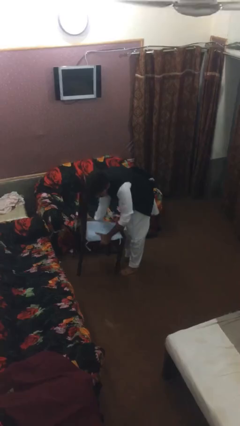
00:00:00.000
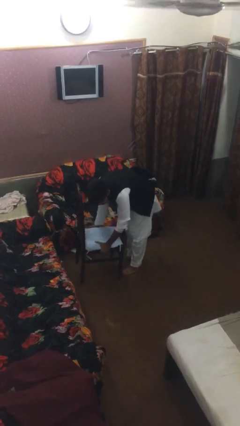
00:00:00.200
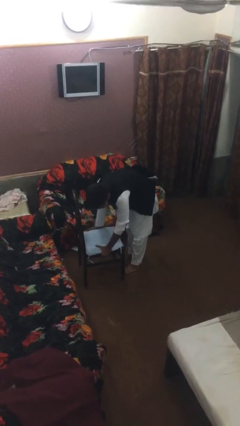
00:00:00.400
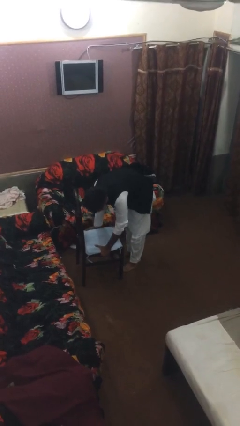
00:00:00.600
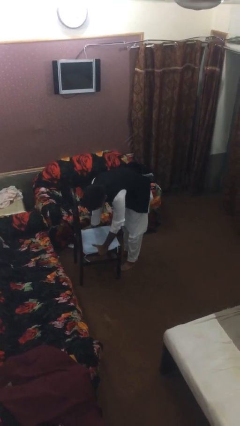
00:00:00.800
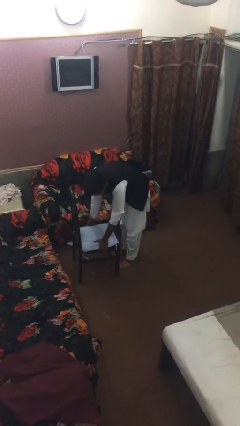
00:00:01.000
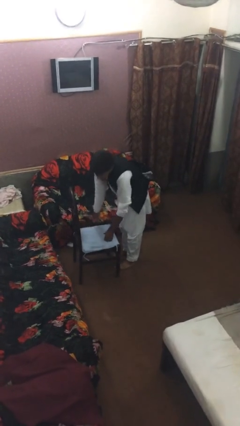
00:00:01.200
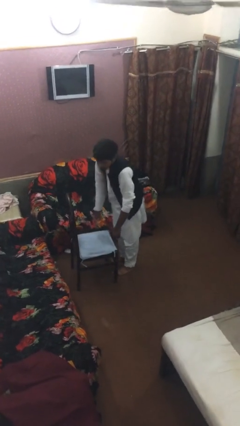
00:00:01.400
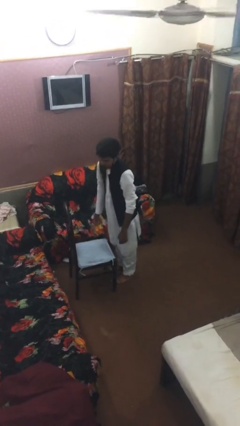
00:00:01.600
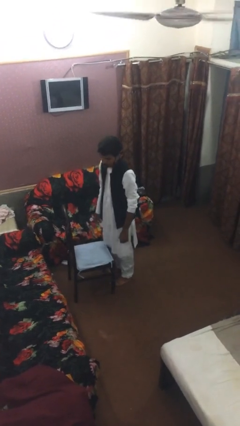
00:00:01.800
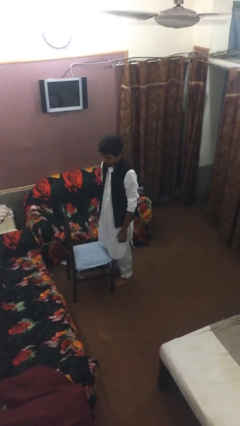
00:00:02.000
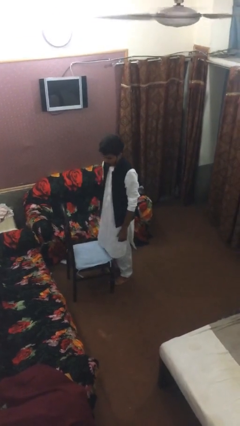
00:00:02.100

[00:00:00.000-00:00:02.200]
person puts down object on floor

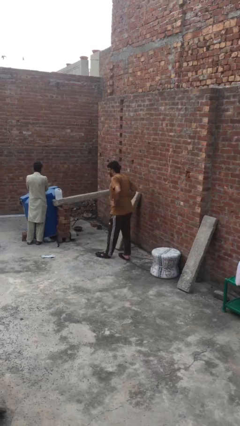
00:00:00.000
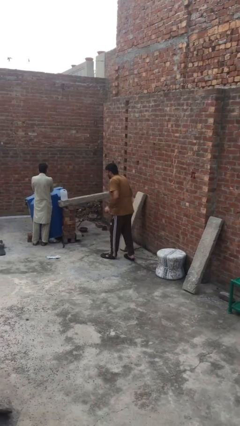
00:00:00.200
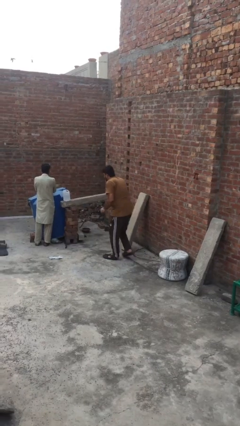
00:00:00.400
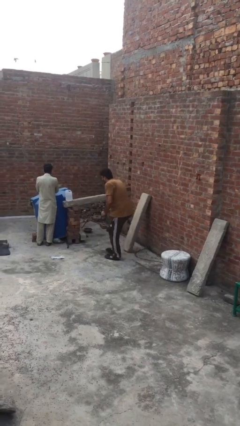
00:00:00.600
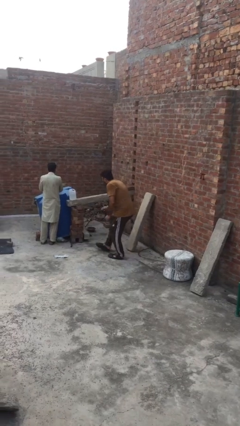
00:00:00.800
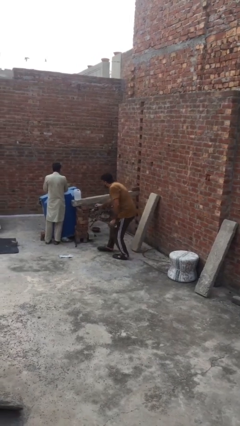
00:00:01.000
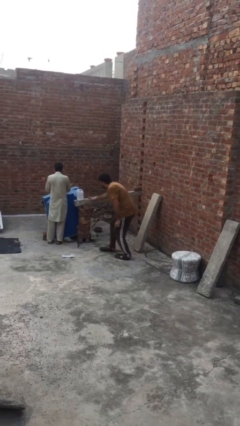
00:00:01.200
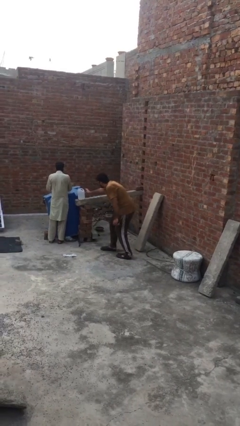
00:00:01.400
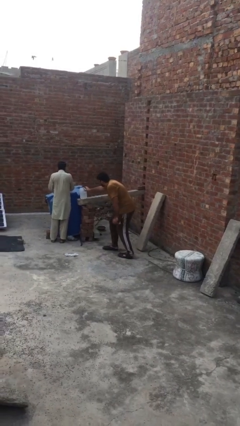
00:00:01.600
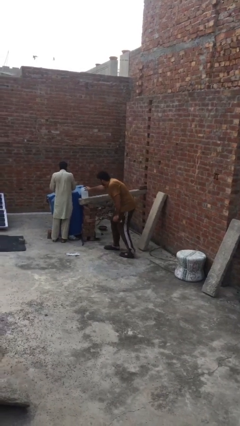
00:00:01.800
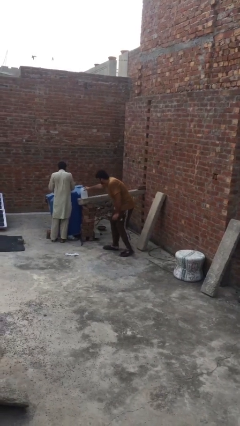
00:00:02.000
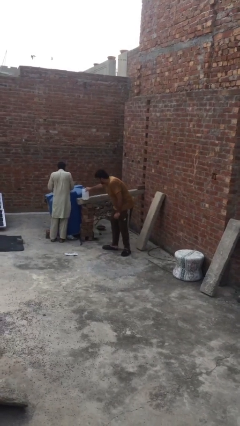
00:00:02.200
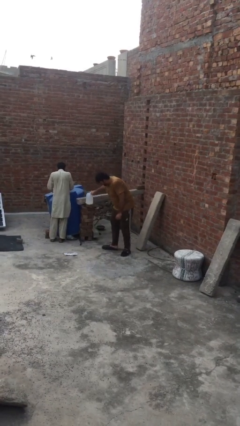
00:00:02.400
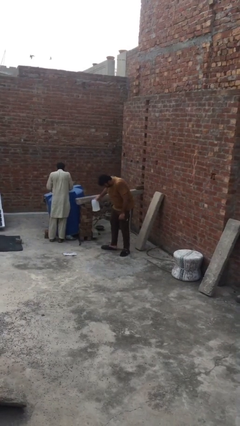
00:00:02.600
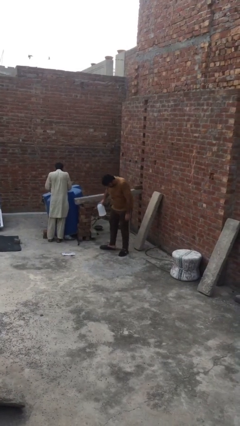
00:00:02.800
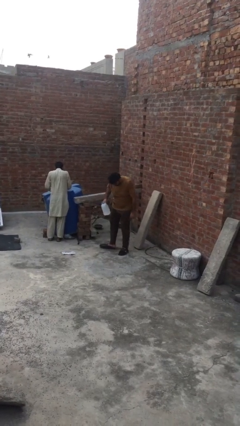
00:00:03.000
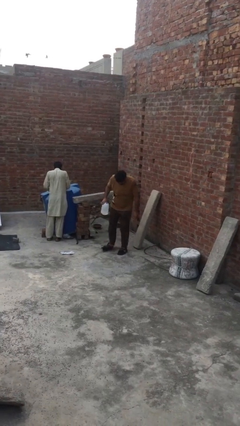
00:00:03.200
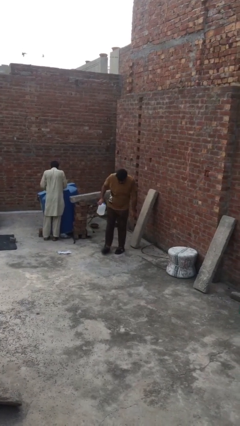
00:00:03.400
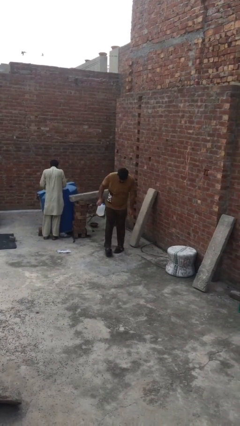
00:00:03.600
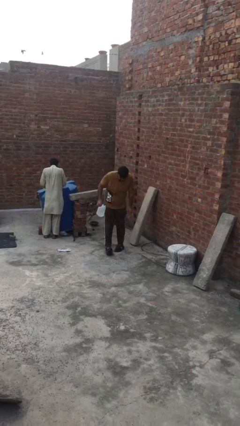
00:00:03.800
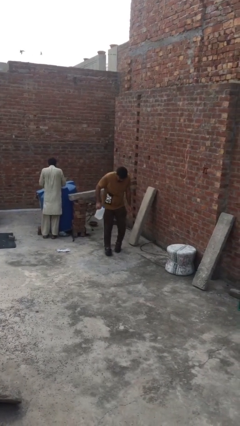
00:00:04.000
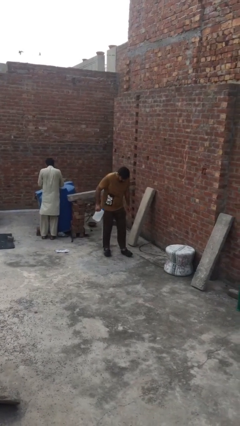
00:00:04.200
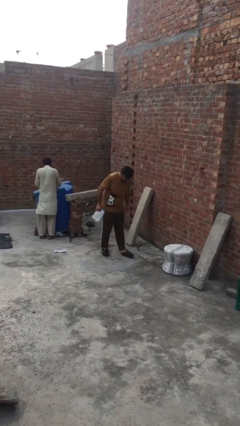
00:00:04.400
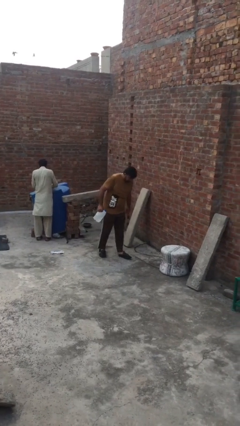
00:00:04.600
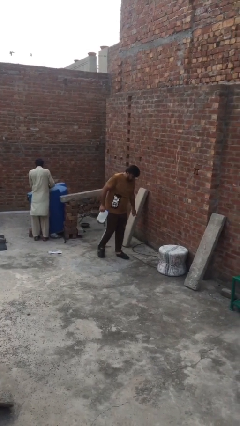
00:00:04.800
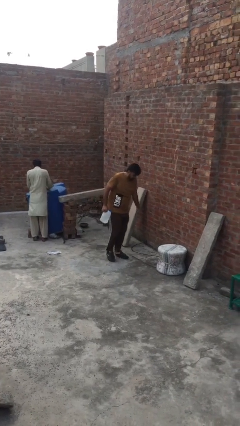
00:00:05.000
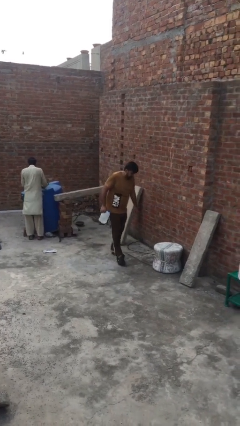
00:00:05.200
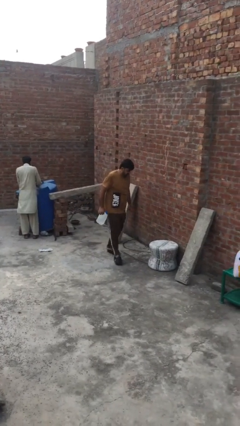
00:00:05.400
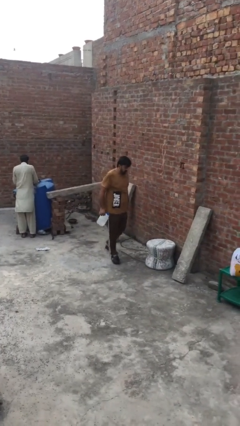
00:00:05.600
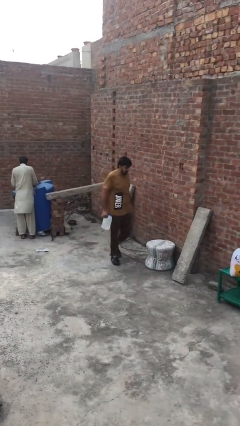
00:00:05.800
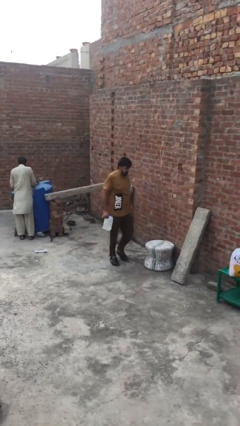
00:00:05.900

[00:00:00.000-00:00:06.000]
person steals object from person

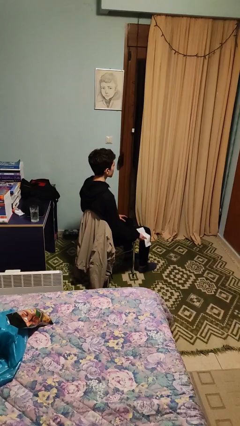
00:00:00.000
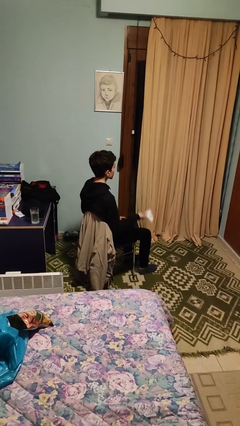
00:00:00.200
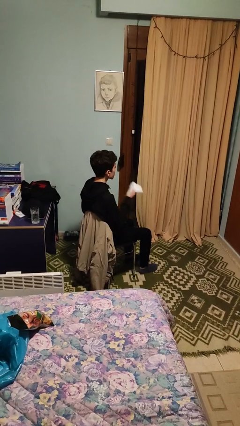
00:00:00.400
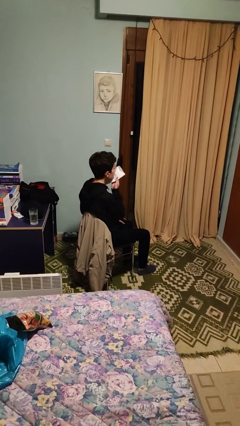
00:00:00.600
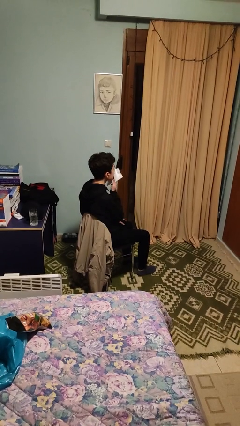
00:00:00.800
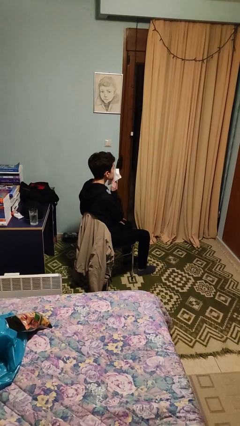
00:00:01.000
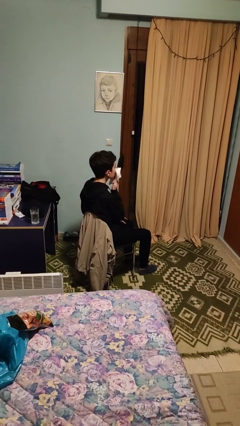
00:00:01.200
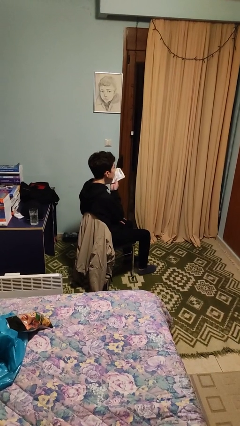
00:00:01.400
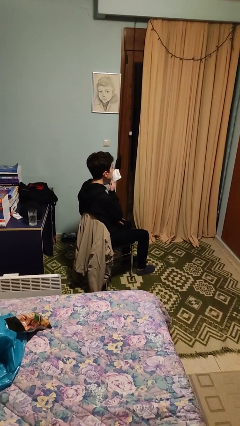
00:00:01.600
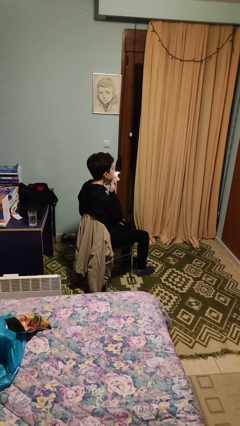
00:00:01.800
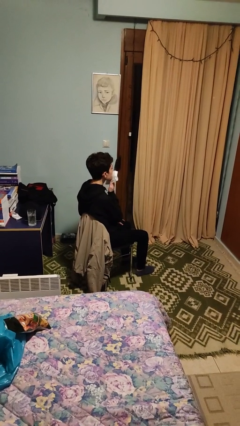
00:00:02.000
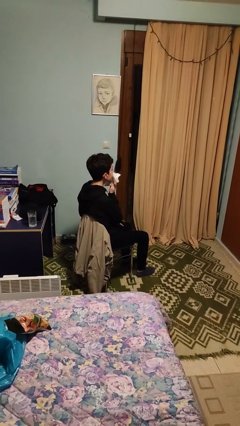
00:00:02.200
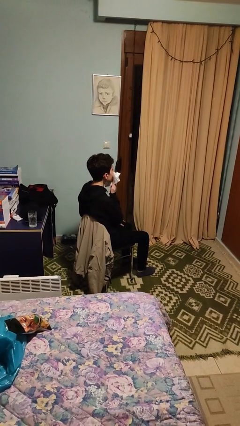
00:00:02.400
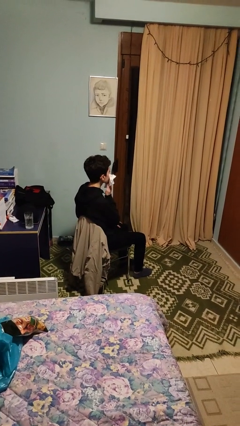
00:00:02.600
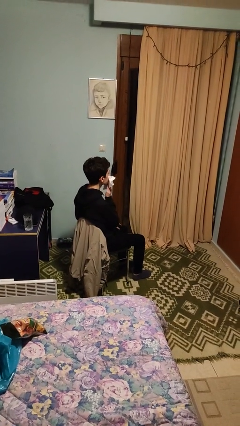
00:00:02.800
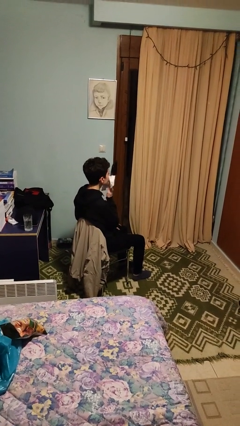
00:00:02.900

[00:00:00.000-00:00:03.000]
person wipes mouth with napkin

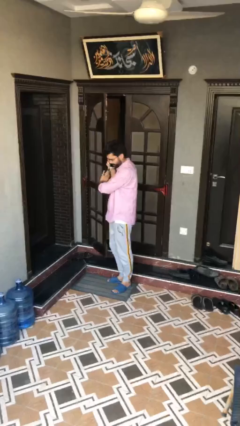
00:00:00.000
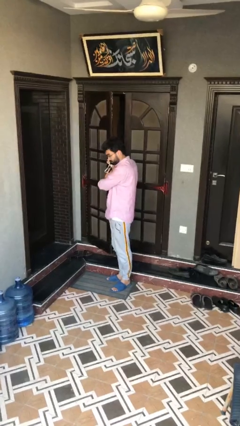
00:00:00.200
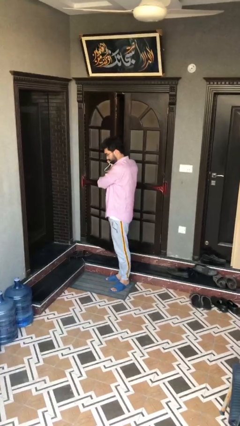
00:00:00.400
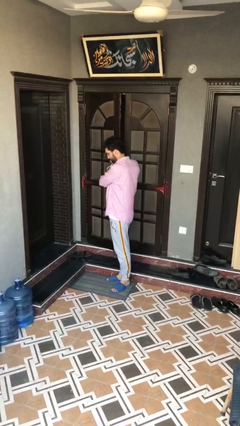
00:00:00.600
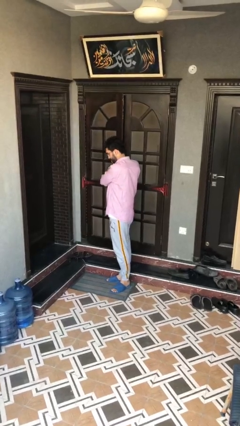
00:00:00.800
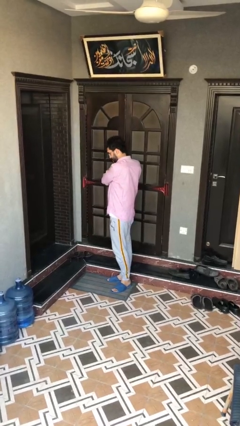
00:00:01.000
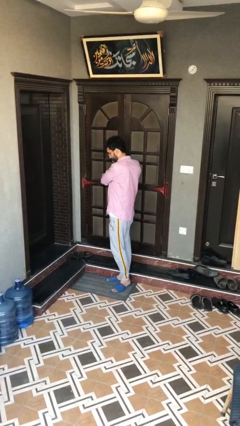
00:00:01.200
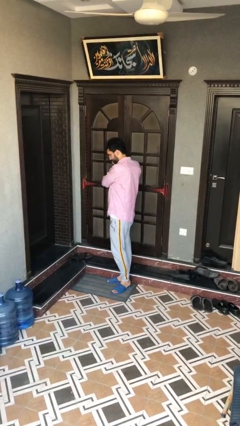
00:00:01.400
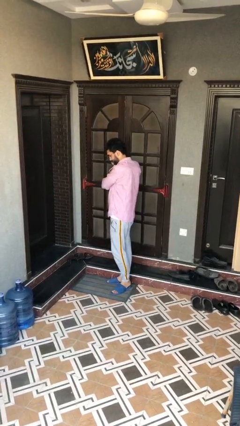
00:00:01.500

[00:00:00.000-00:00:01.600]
person closes facility door

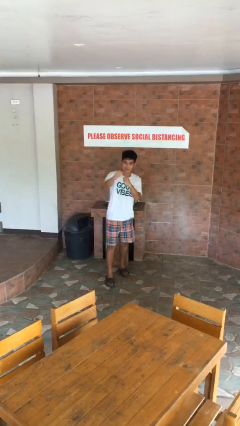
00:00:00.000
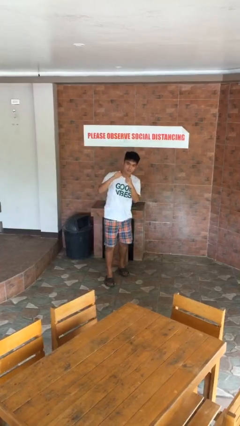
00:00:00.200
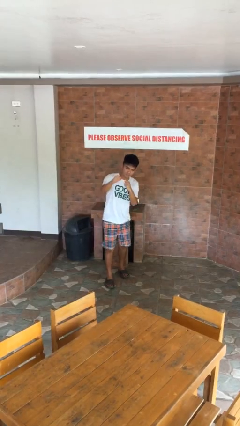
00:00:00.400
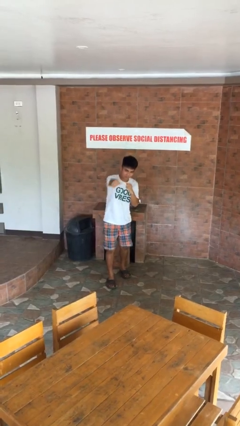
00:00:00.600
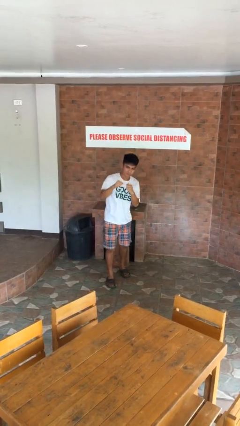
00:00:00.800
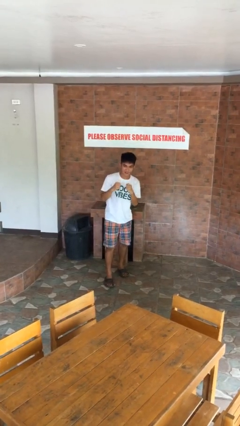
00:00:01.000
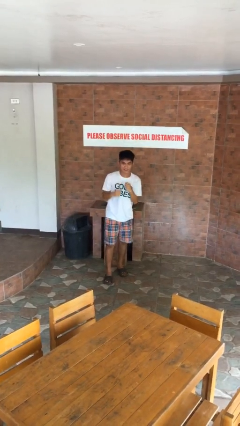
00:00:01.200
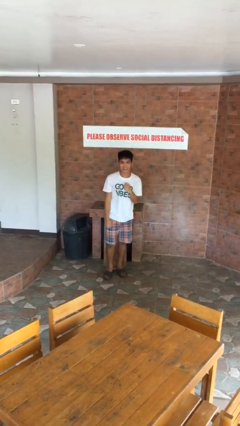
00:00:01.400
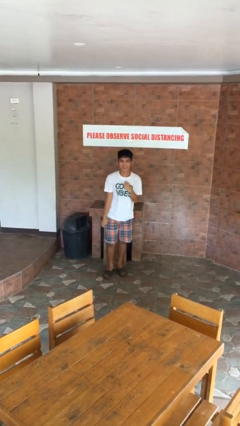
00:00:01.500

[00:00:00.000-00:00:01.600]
person punches

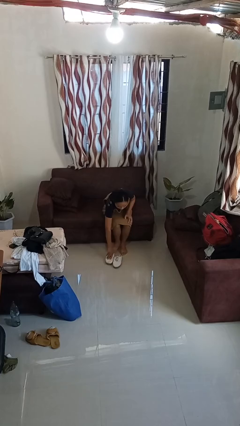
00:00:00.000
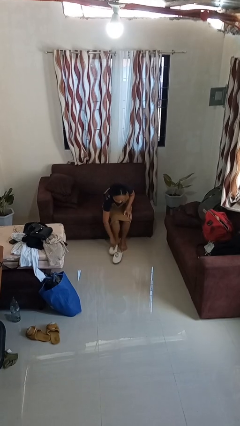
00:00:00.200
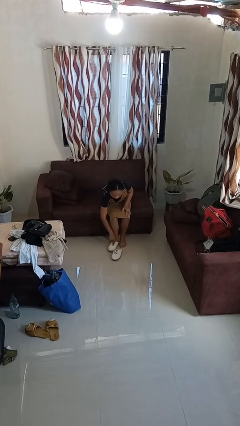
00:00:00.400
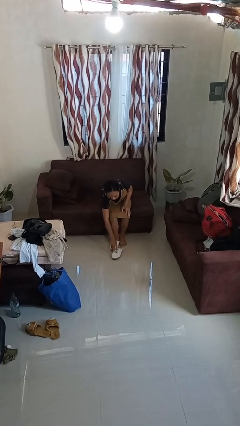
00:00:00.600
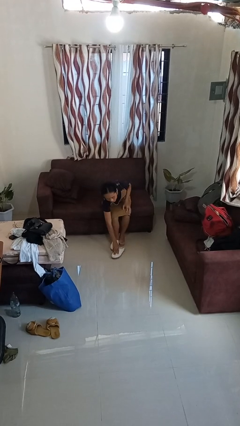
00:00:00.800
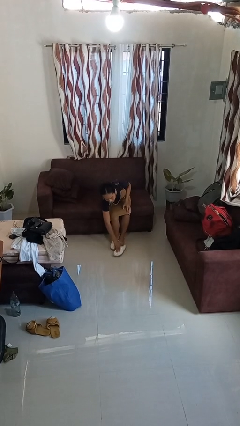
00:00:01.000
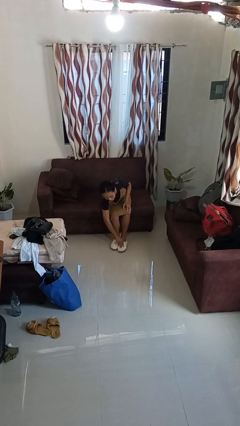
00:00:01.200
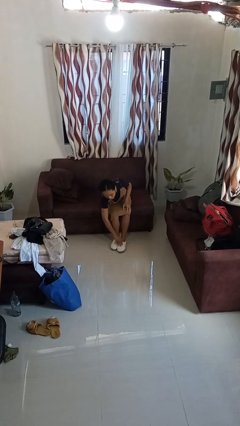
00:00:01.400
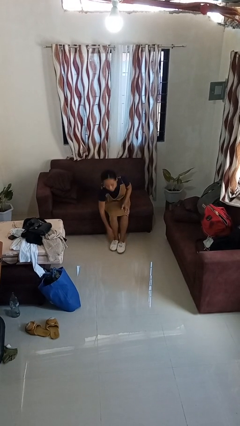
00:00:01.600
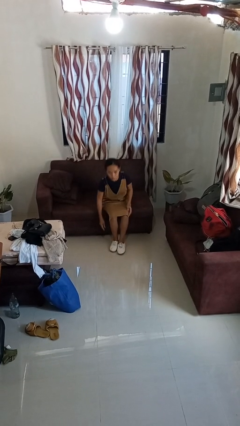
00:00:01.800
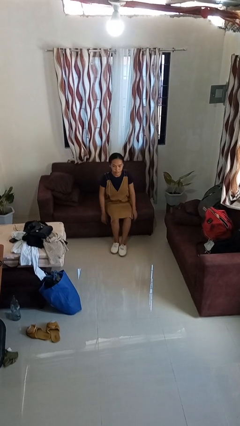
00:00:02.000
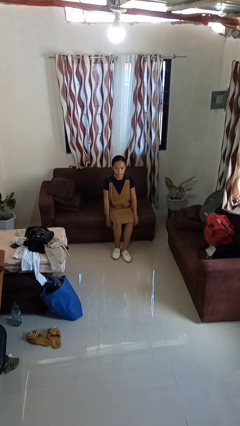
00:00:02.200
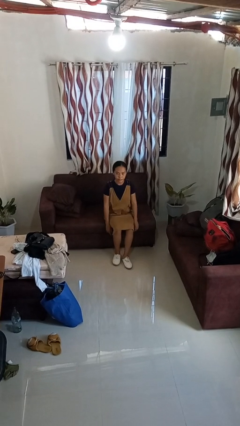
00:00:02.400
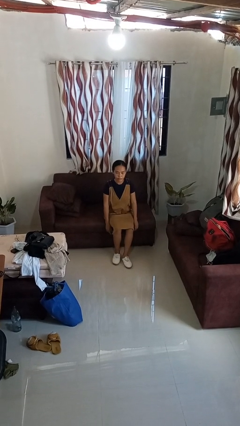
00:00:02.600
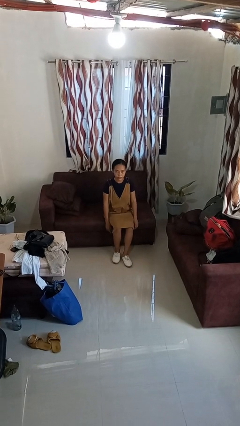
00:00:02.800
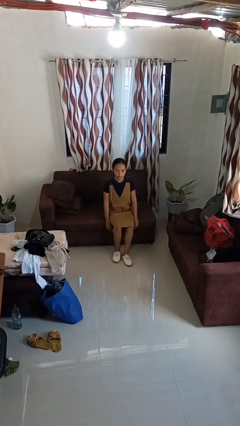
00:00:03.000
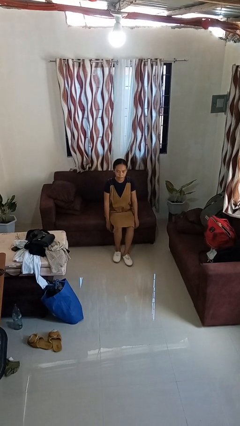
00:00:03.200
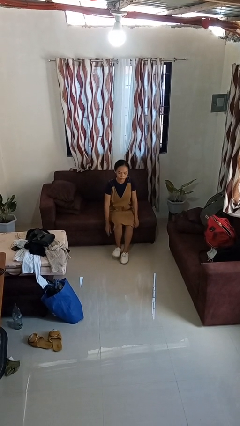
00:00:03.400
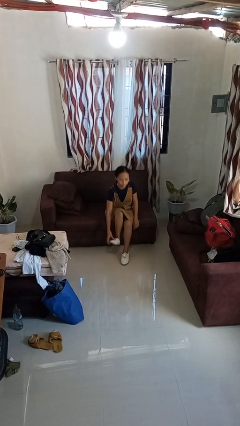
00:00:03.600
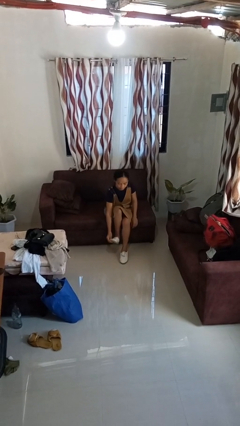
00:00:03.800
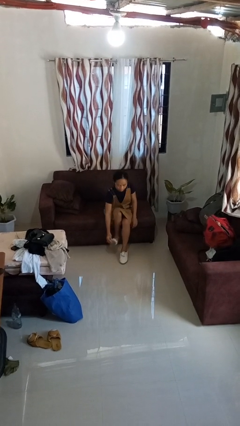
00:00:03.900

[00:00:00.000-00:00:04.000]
person puts on shoes
